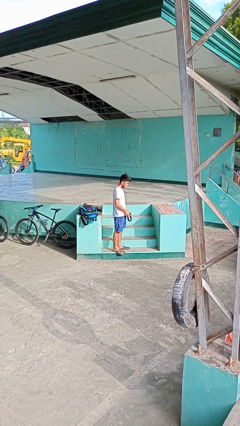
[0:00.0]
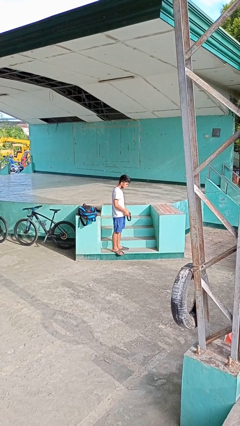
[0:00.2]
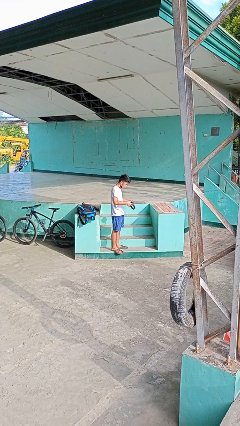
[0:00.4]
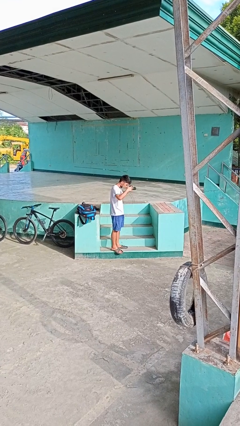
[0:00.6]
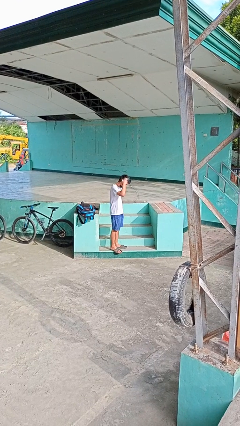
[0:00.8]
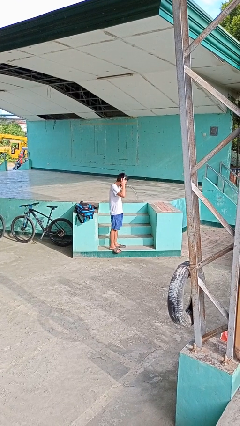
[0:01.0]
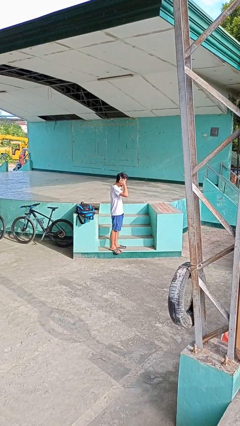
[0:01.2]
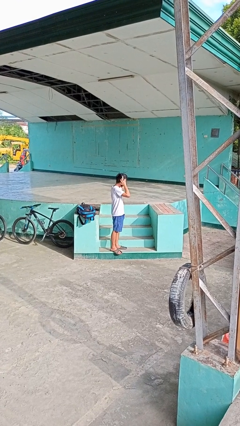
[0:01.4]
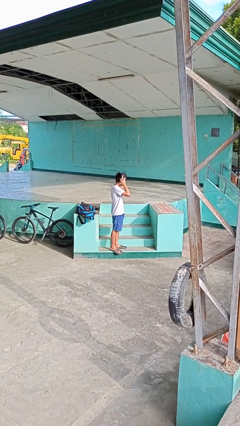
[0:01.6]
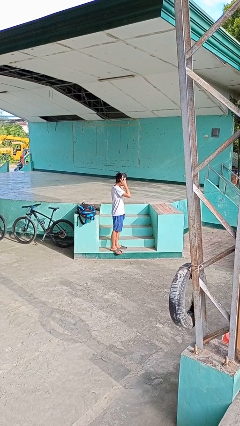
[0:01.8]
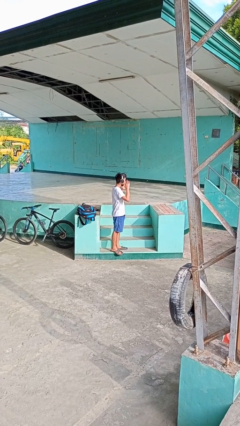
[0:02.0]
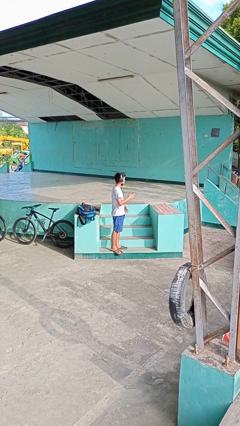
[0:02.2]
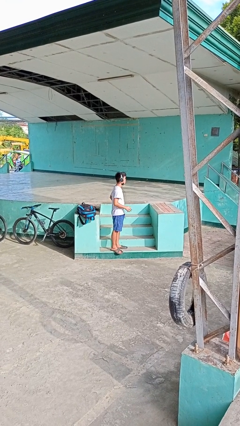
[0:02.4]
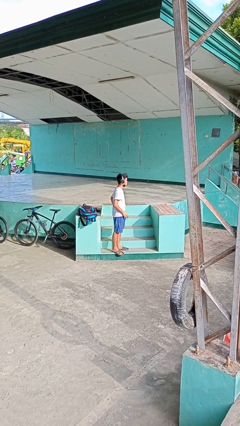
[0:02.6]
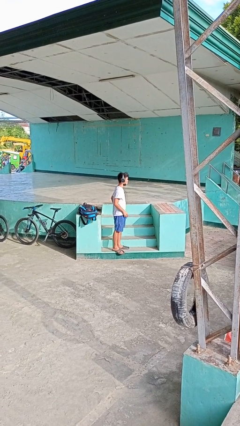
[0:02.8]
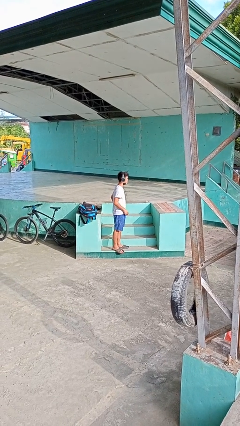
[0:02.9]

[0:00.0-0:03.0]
person puts on headphones

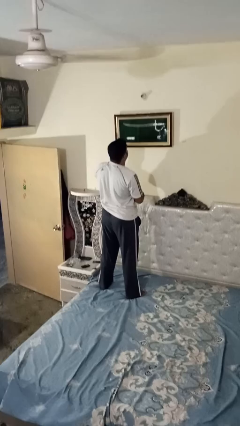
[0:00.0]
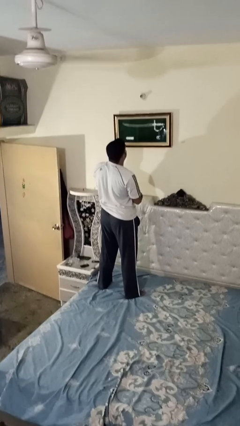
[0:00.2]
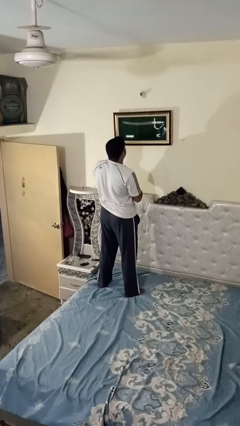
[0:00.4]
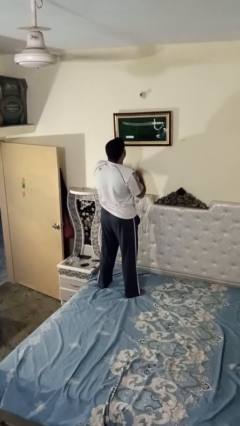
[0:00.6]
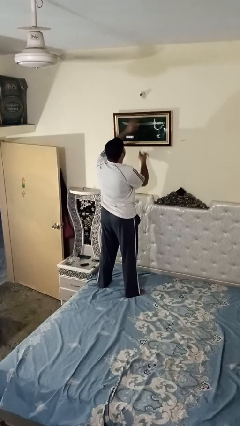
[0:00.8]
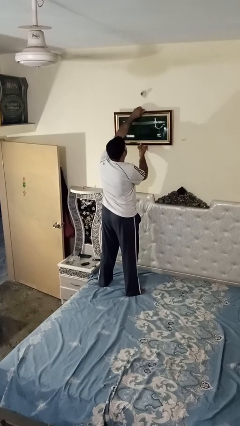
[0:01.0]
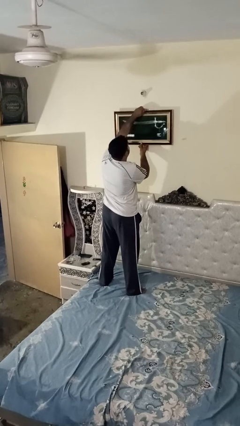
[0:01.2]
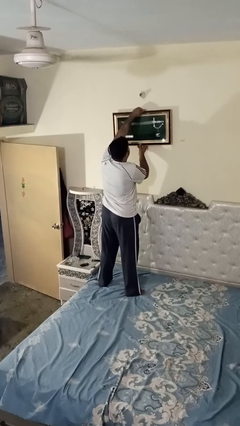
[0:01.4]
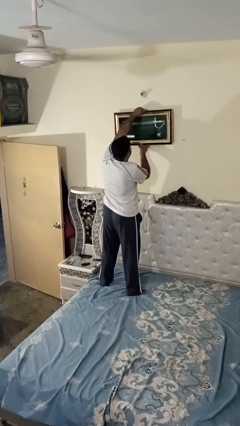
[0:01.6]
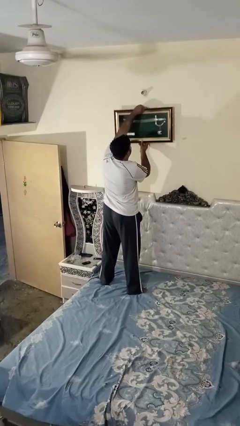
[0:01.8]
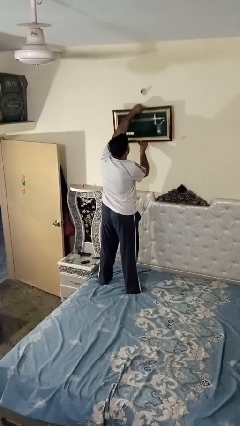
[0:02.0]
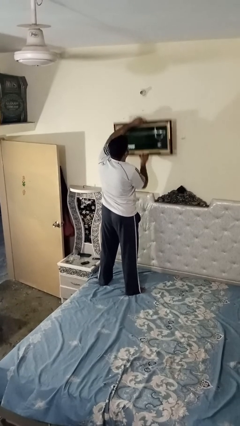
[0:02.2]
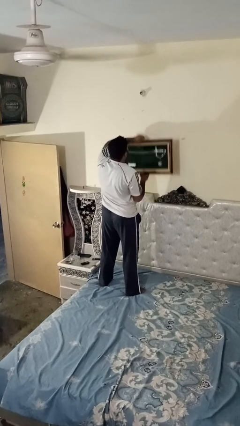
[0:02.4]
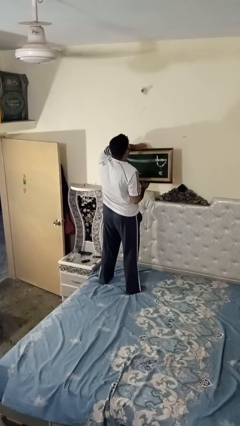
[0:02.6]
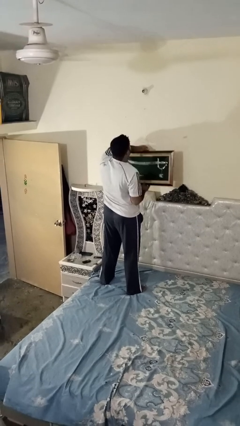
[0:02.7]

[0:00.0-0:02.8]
person takes down picture frame

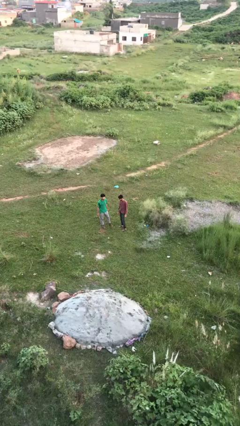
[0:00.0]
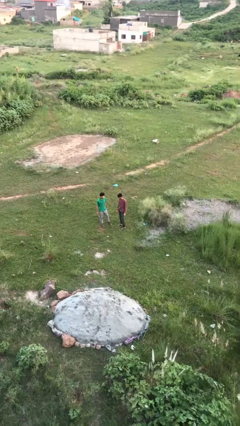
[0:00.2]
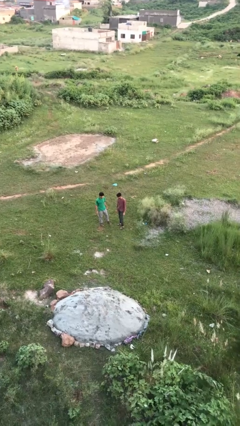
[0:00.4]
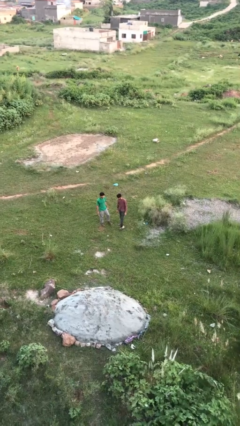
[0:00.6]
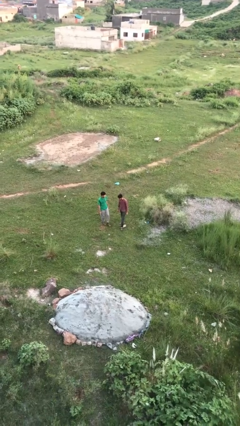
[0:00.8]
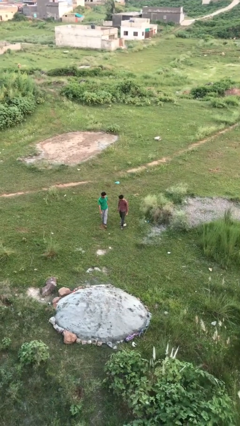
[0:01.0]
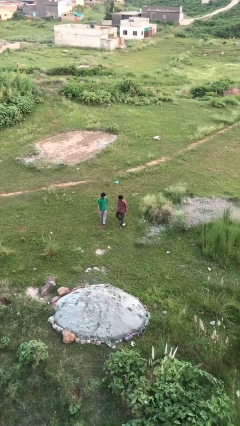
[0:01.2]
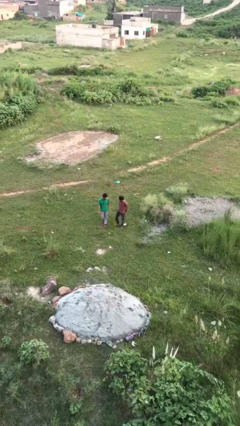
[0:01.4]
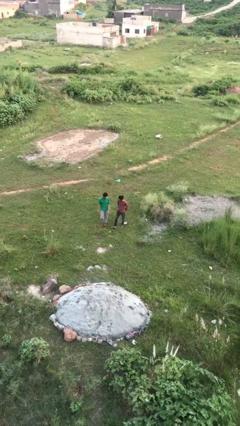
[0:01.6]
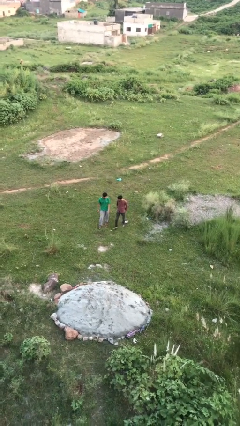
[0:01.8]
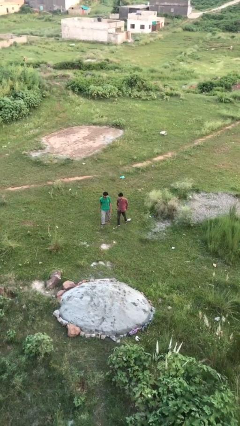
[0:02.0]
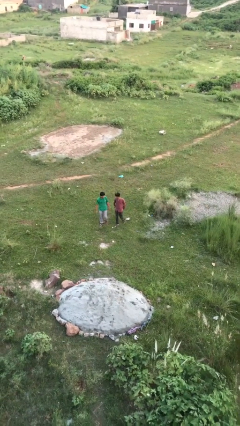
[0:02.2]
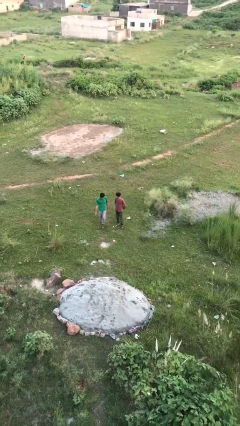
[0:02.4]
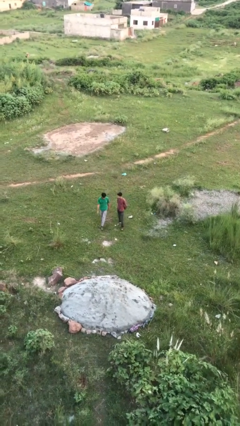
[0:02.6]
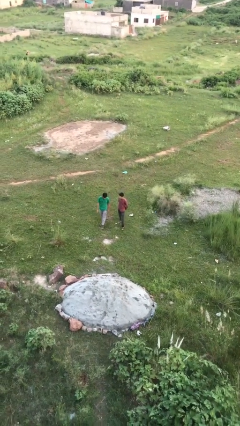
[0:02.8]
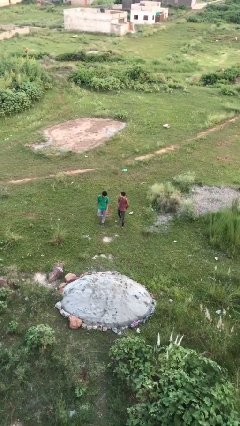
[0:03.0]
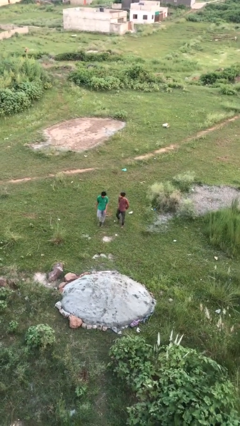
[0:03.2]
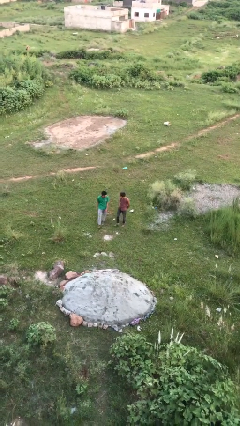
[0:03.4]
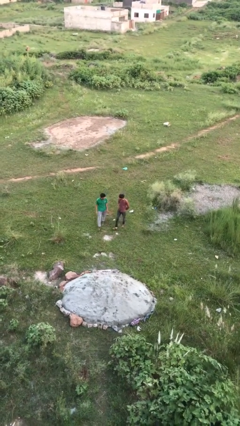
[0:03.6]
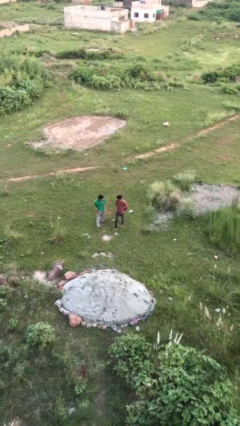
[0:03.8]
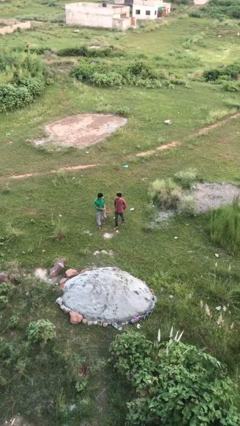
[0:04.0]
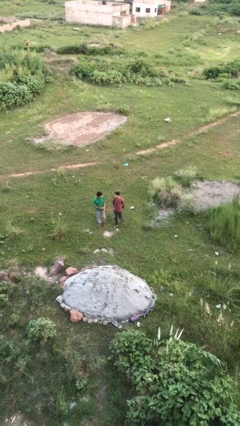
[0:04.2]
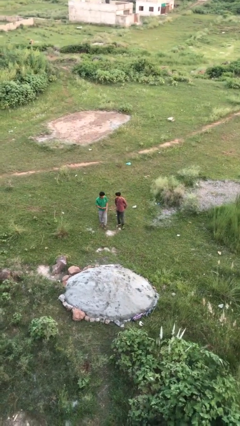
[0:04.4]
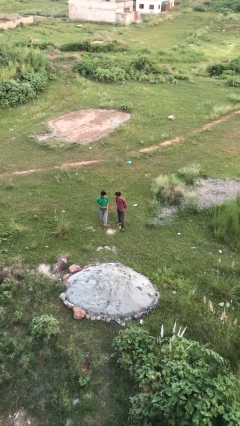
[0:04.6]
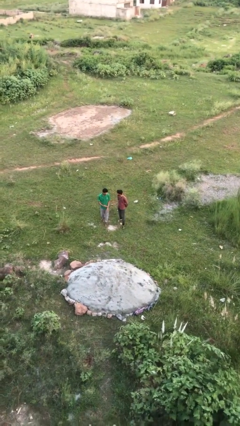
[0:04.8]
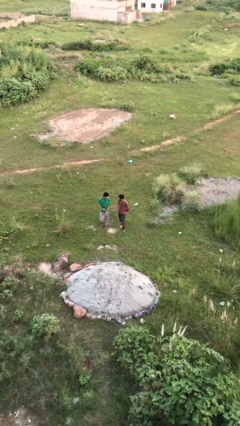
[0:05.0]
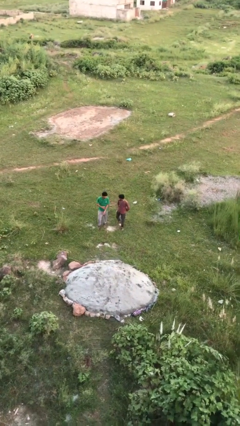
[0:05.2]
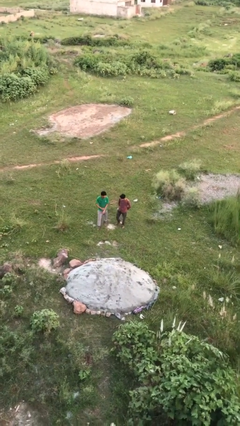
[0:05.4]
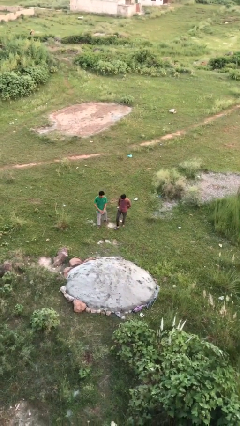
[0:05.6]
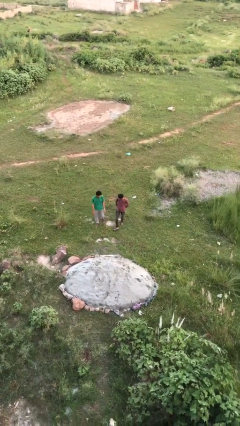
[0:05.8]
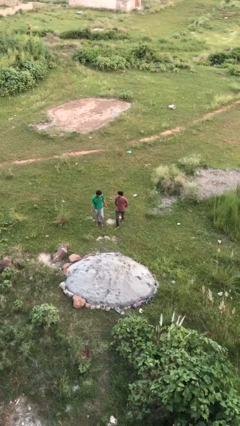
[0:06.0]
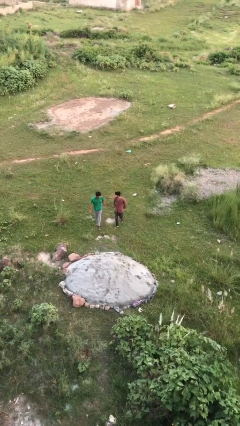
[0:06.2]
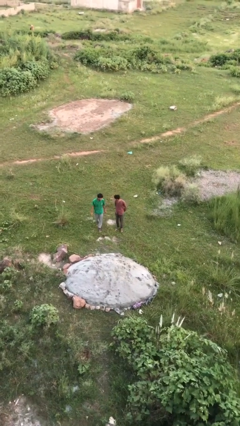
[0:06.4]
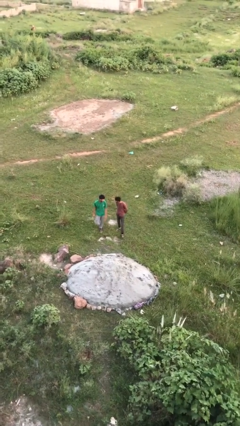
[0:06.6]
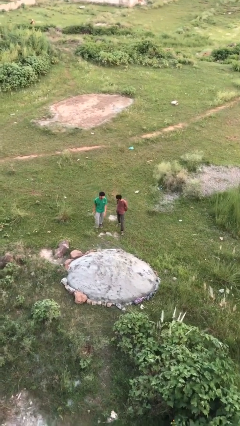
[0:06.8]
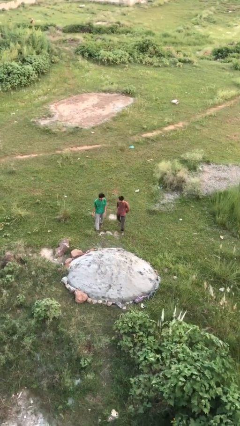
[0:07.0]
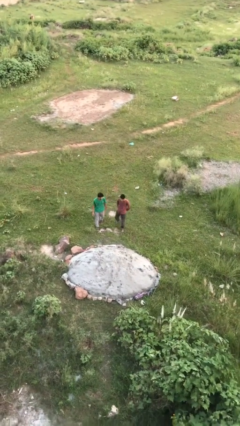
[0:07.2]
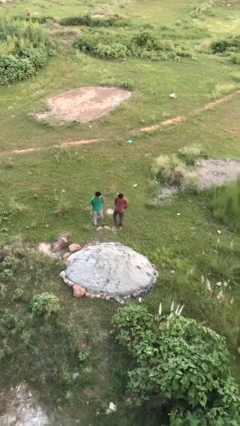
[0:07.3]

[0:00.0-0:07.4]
person talks to person

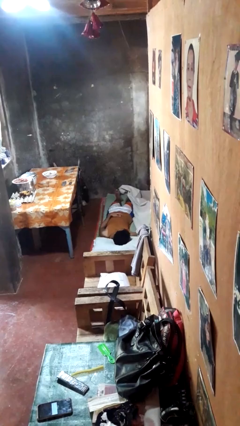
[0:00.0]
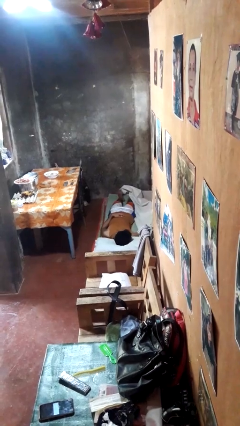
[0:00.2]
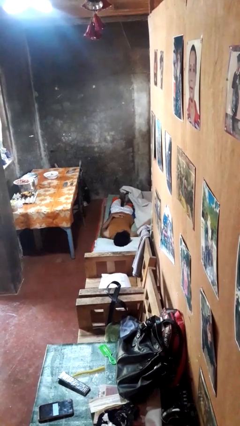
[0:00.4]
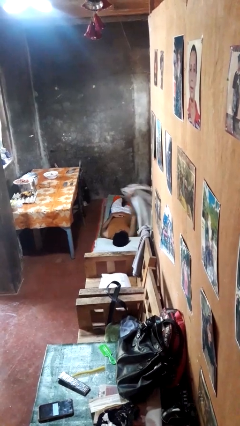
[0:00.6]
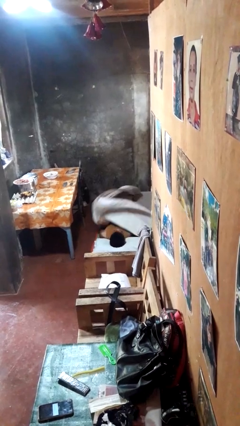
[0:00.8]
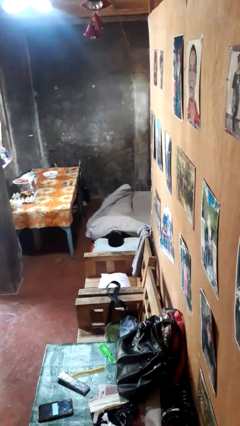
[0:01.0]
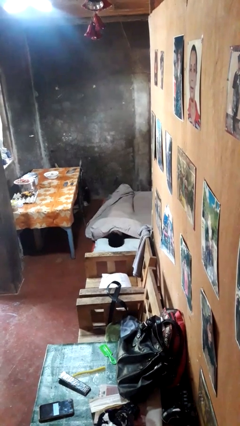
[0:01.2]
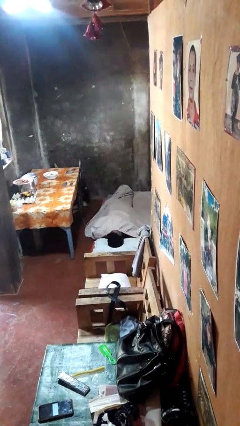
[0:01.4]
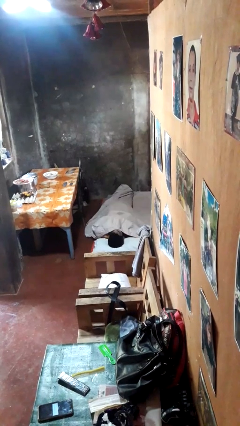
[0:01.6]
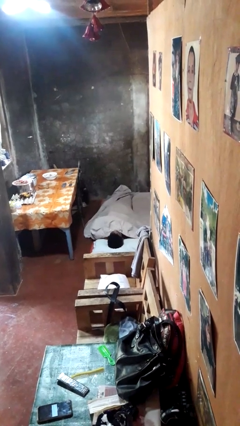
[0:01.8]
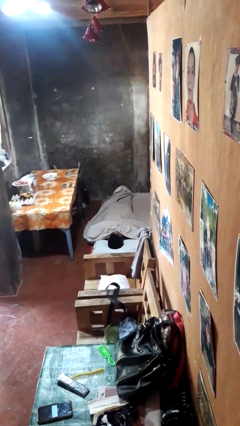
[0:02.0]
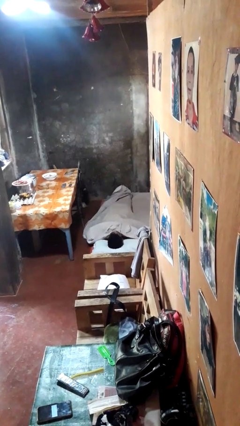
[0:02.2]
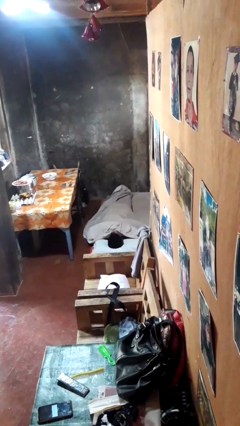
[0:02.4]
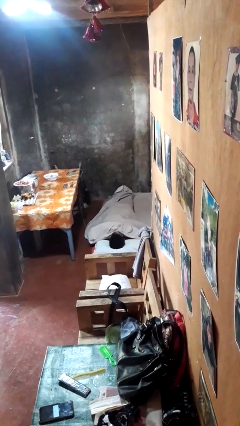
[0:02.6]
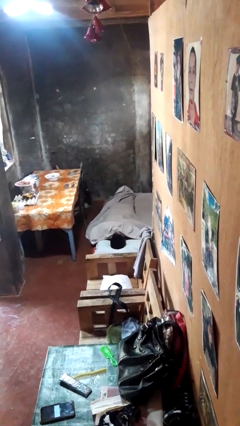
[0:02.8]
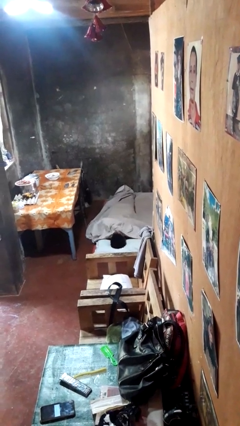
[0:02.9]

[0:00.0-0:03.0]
person covers with bedsheets

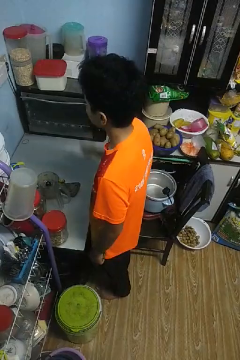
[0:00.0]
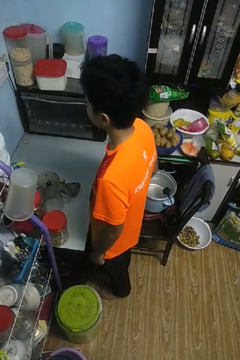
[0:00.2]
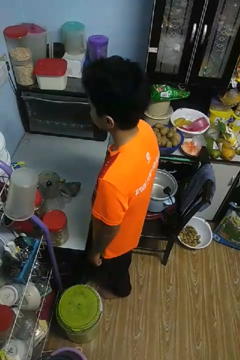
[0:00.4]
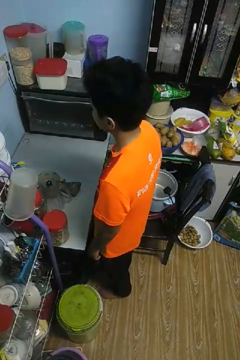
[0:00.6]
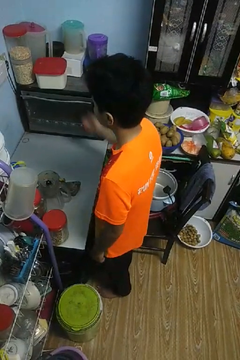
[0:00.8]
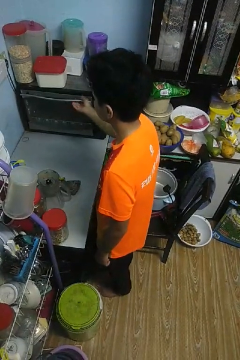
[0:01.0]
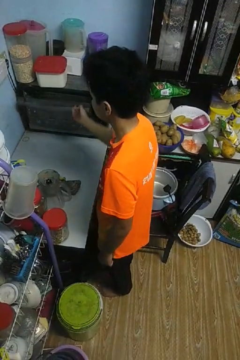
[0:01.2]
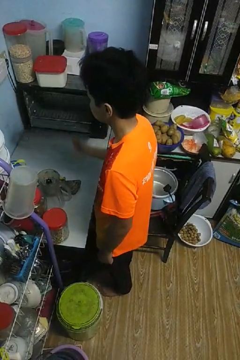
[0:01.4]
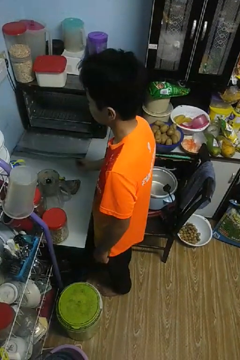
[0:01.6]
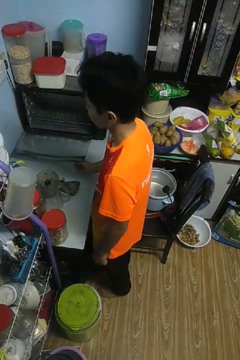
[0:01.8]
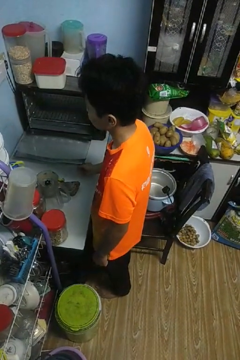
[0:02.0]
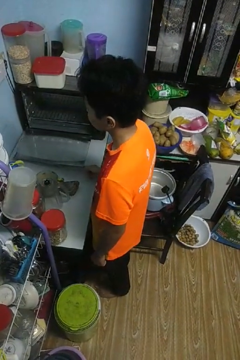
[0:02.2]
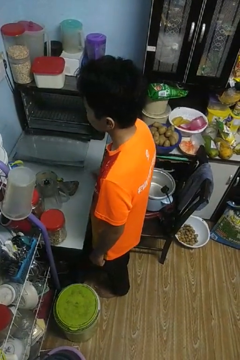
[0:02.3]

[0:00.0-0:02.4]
person opens oven door
